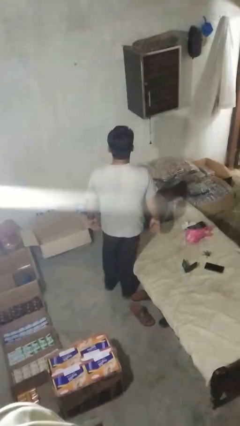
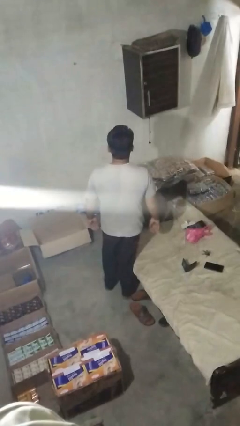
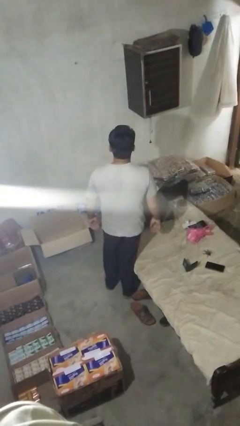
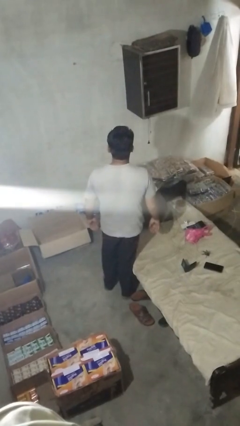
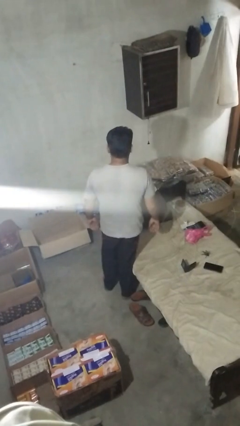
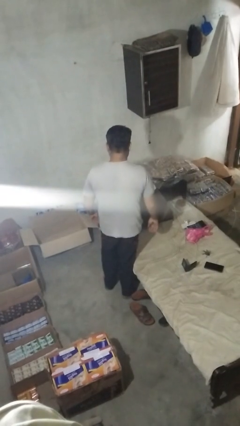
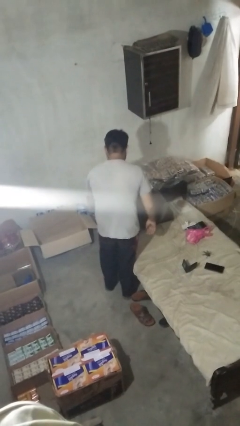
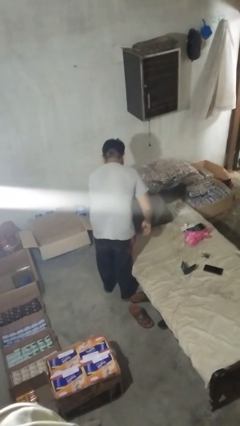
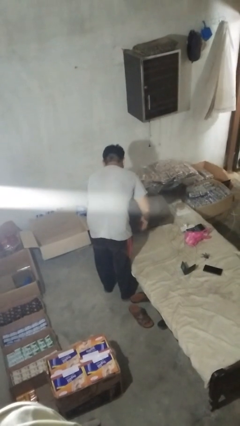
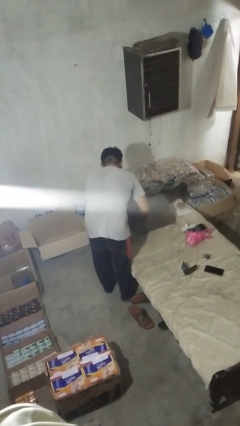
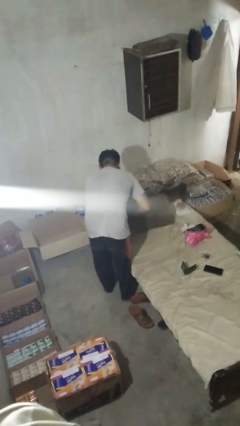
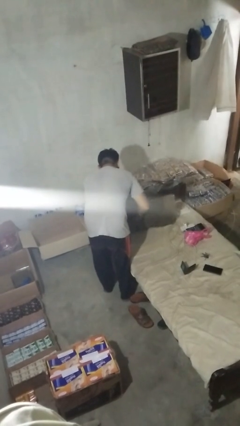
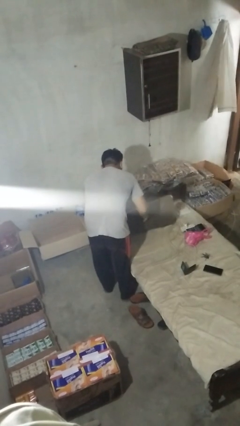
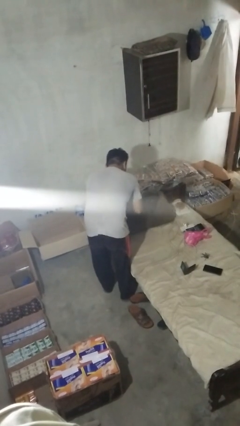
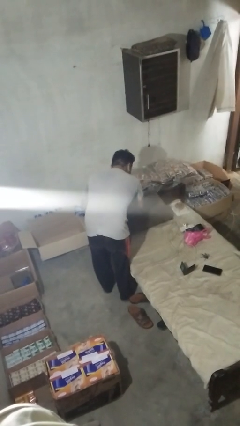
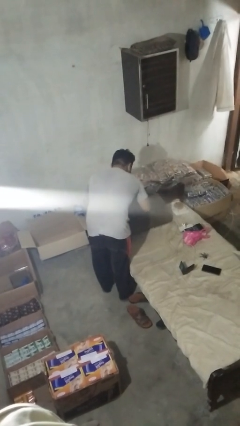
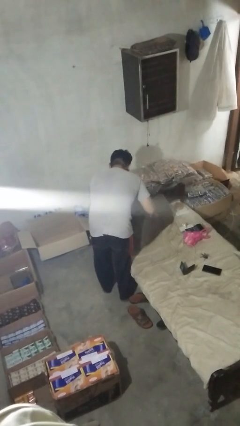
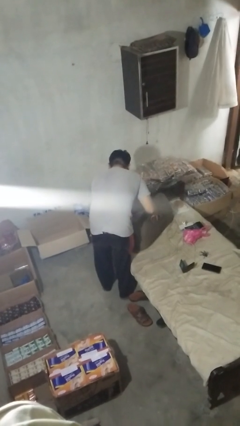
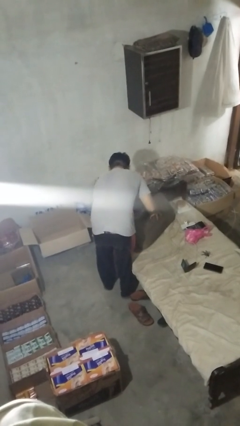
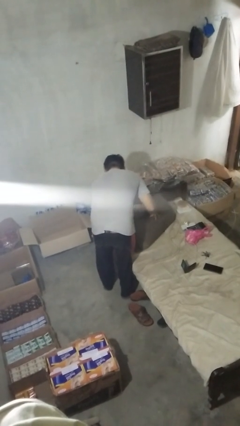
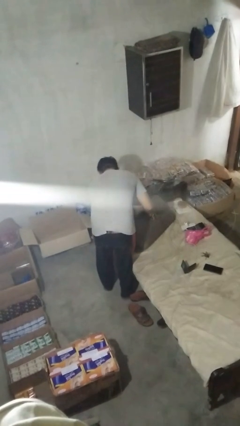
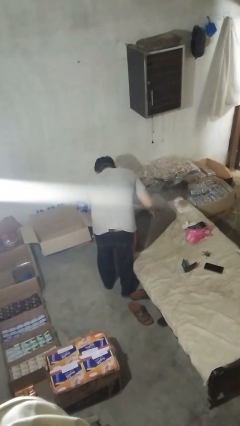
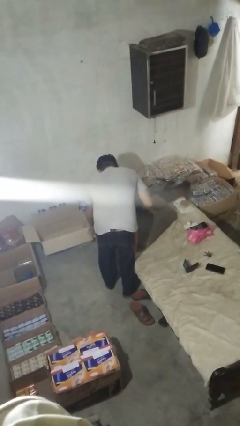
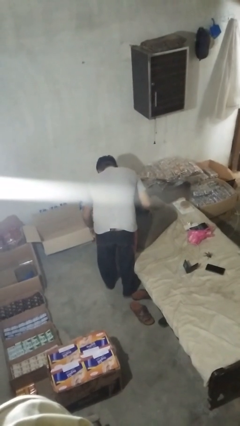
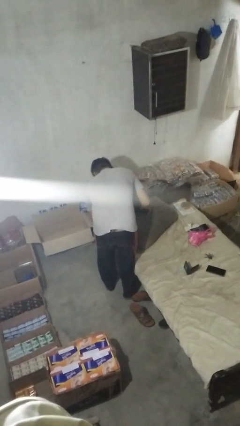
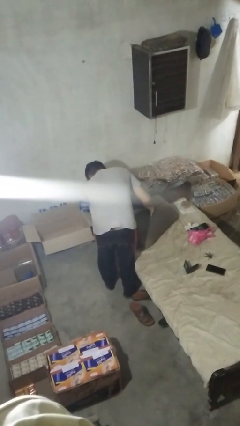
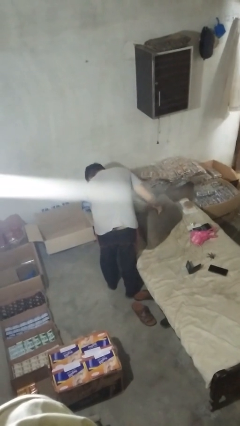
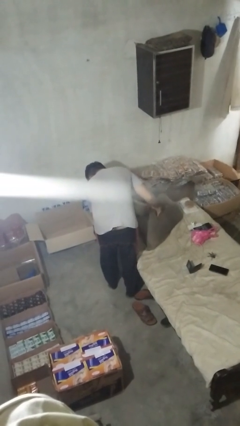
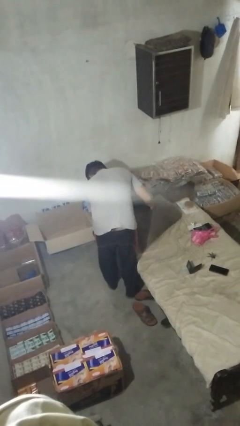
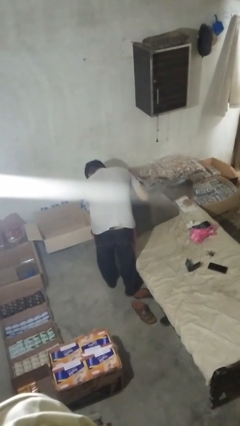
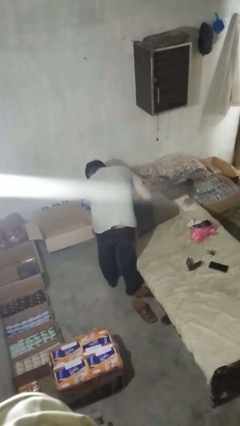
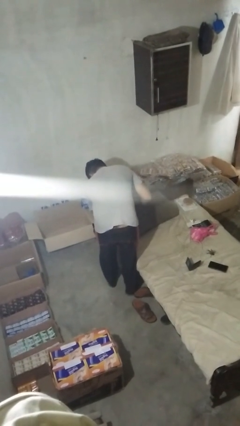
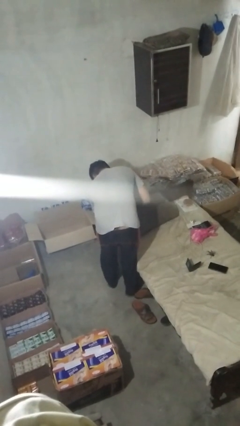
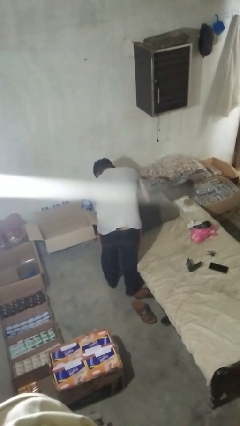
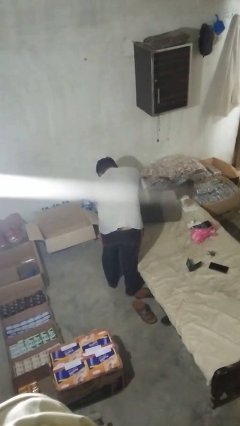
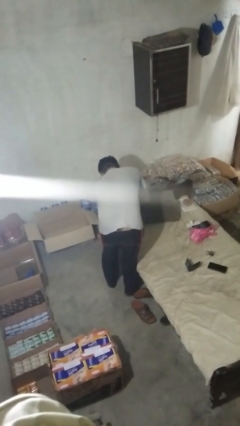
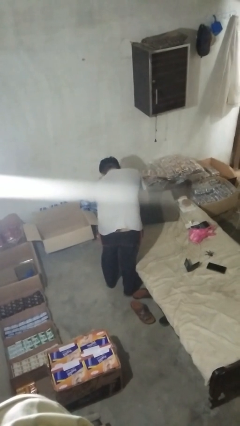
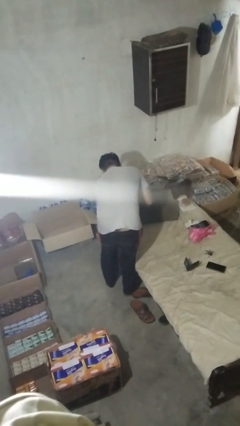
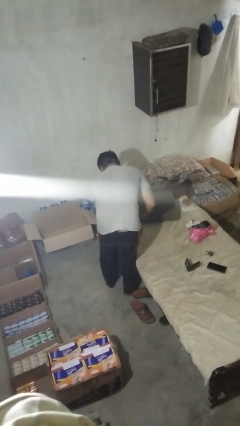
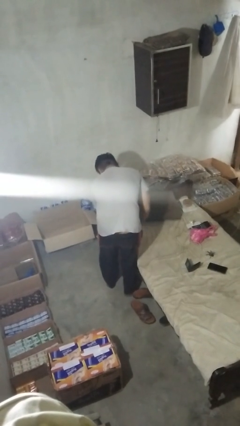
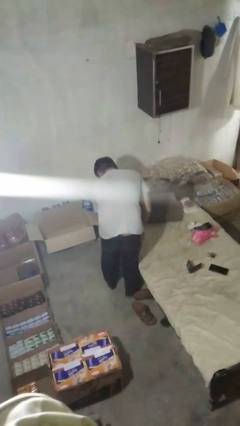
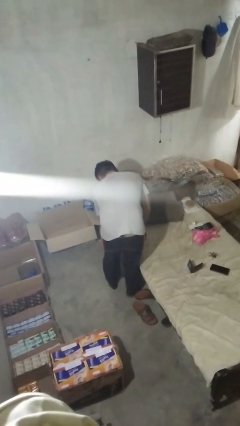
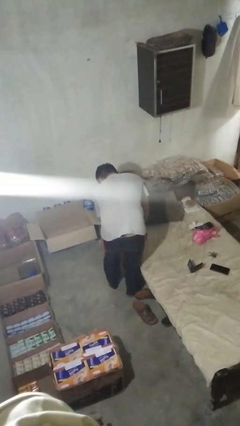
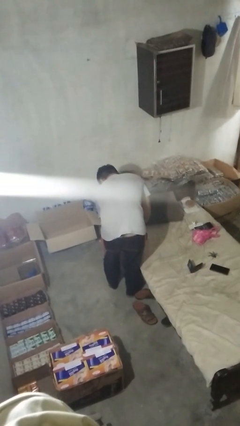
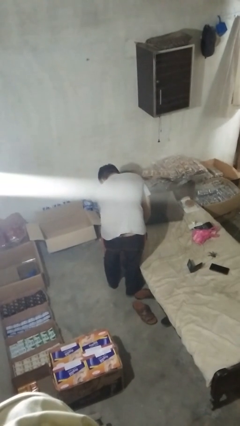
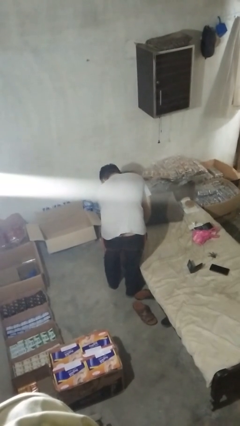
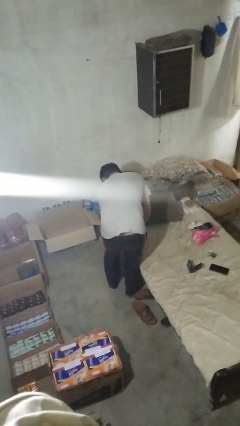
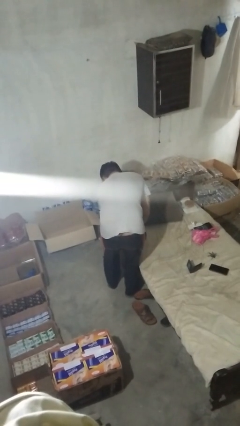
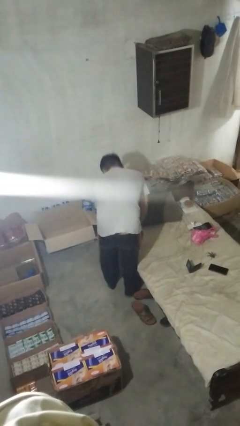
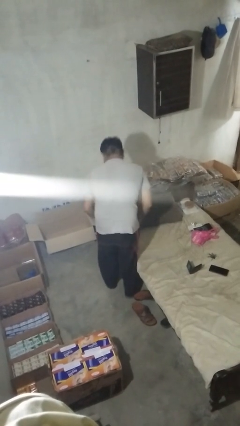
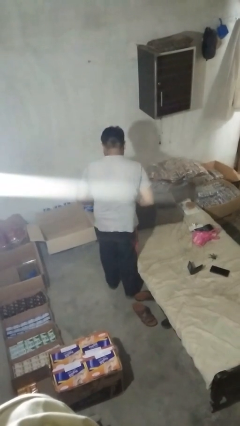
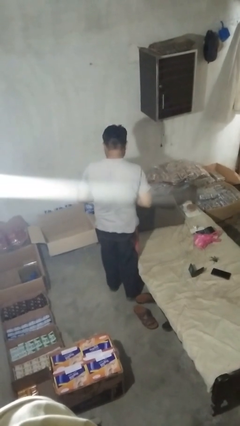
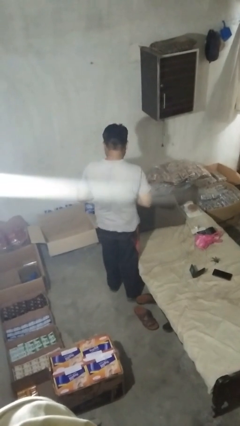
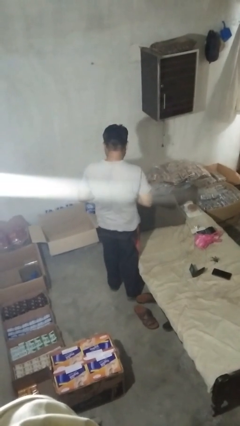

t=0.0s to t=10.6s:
person searches in couch

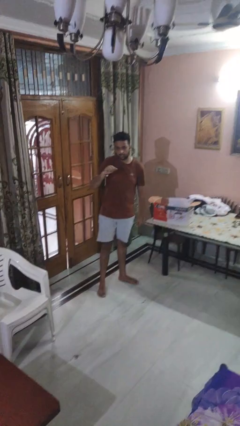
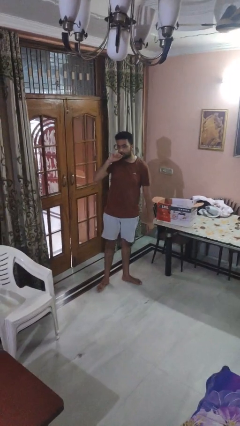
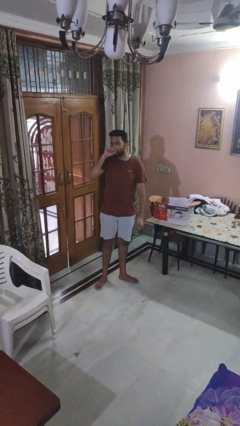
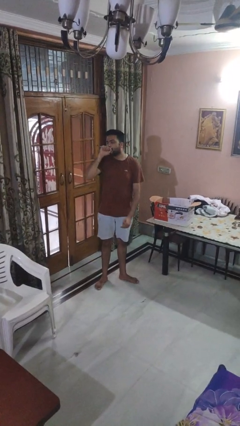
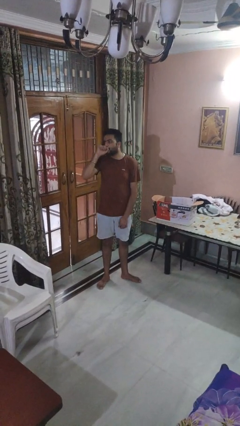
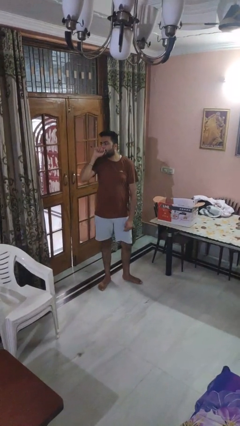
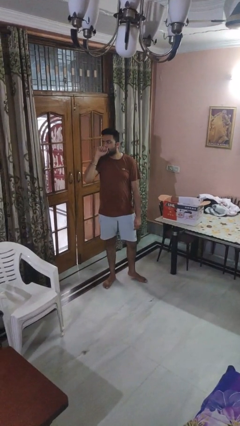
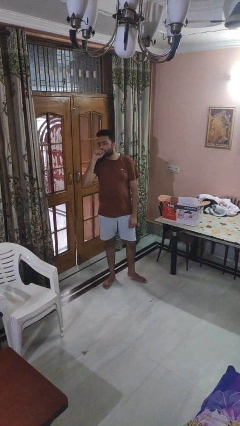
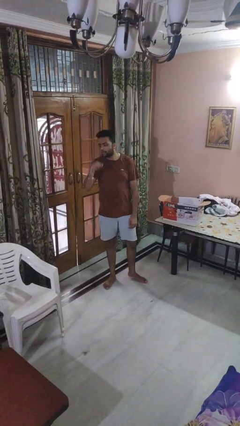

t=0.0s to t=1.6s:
person vapes

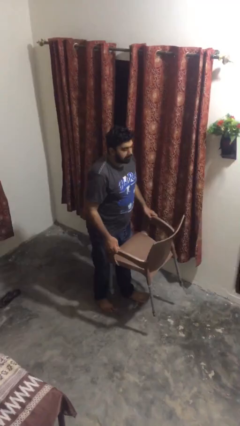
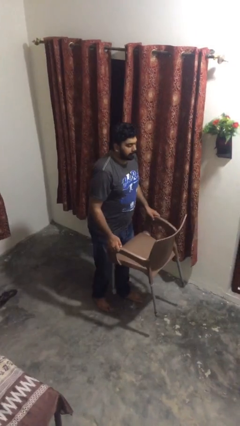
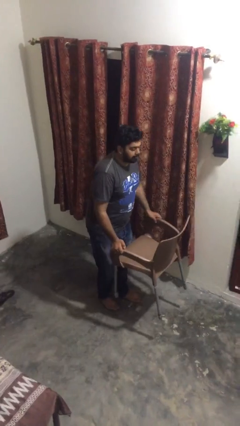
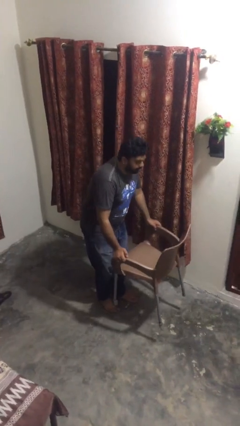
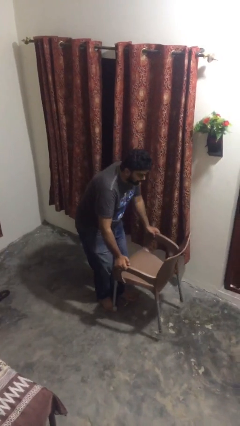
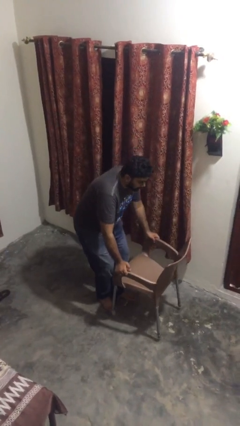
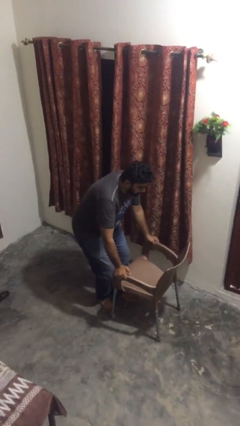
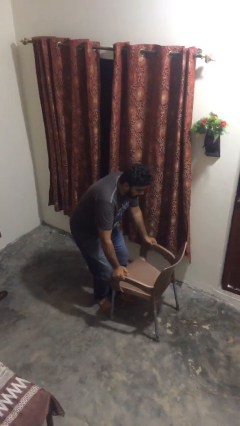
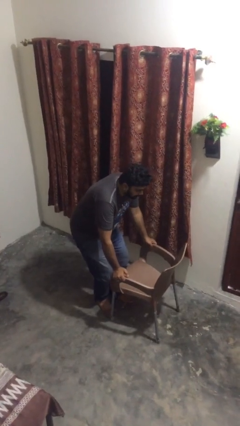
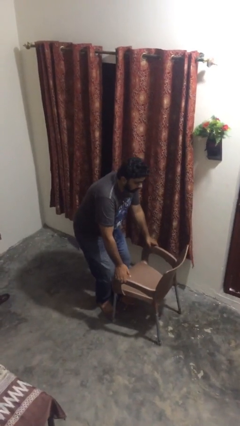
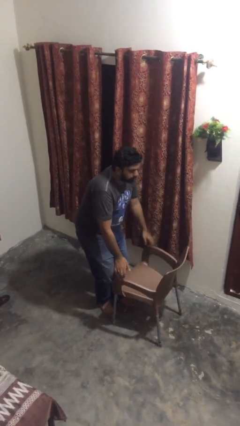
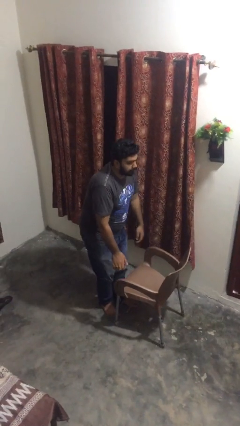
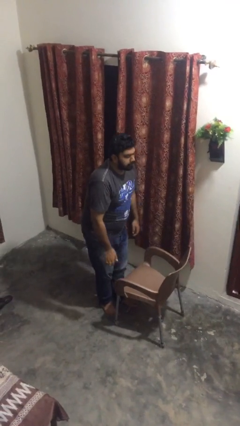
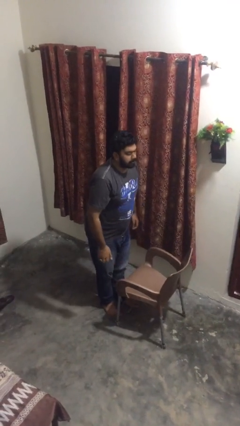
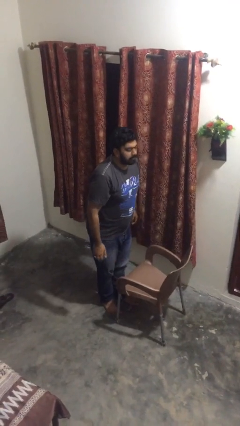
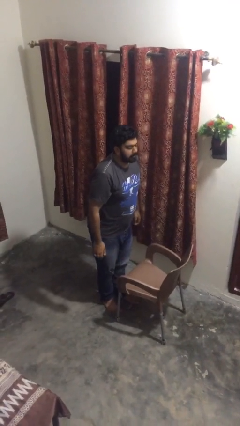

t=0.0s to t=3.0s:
person puts down object on floor

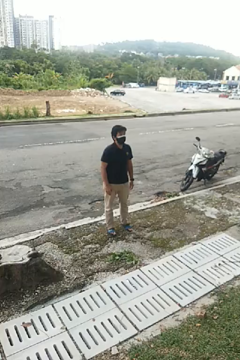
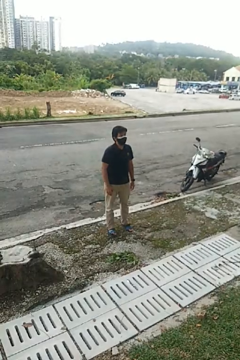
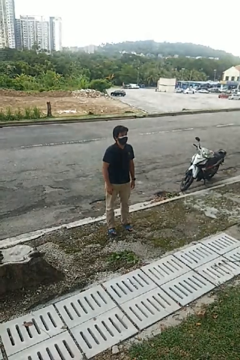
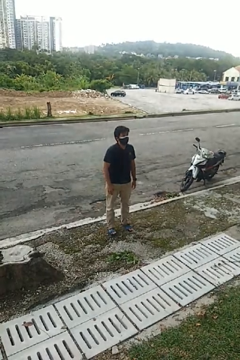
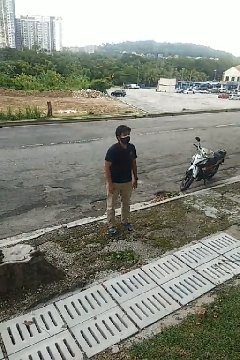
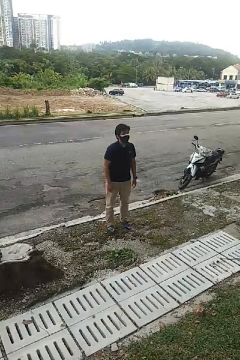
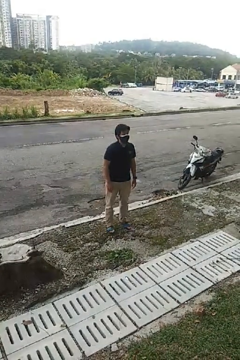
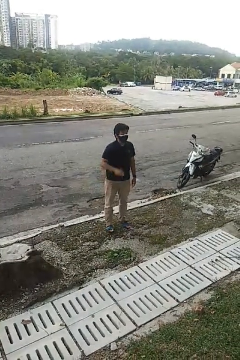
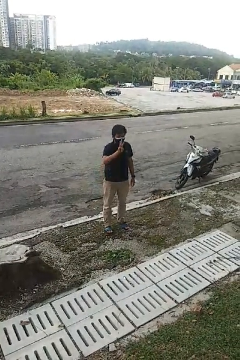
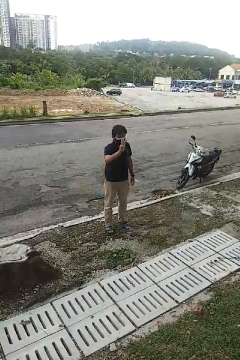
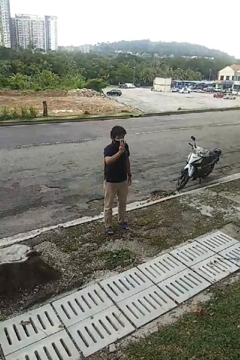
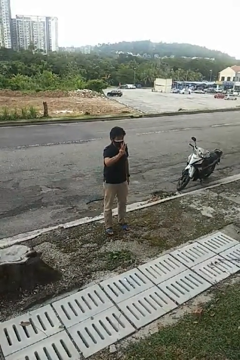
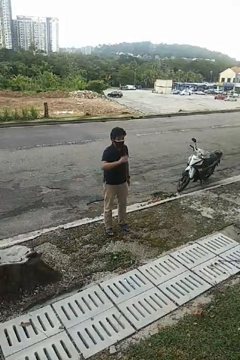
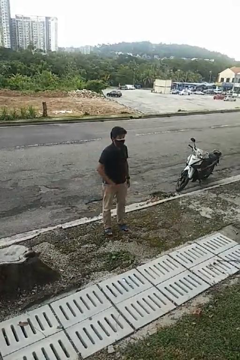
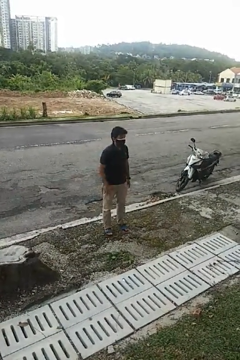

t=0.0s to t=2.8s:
person gestures number three

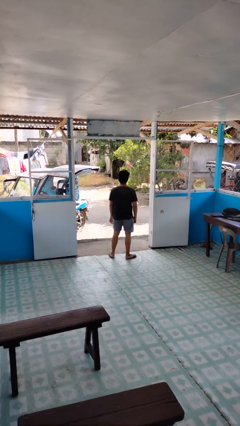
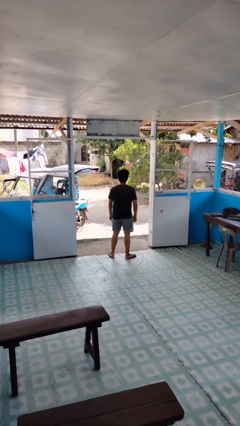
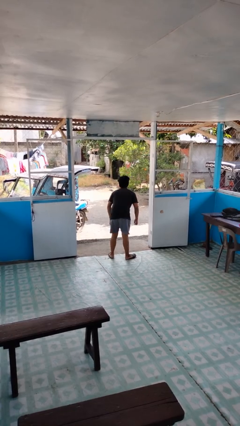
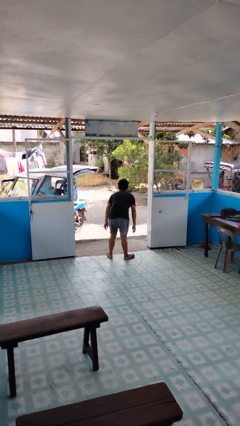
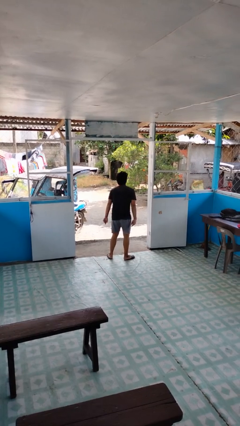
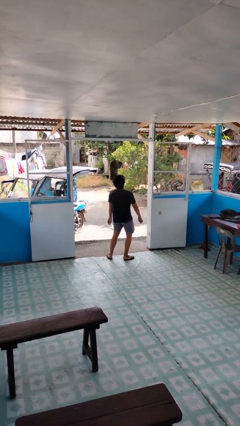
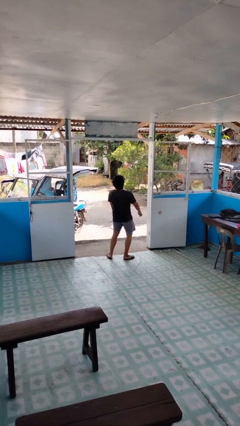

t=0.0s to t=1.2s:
person wiggles hips
